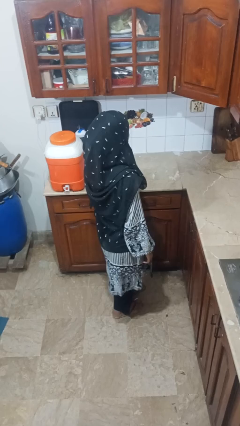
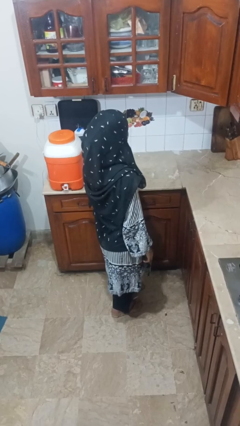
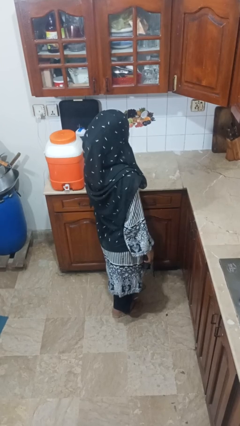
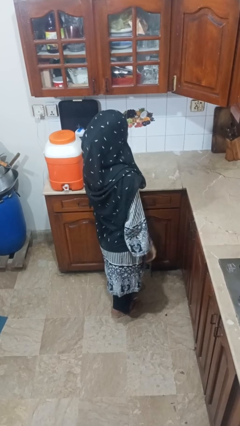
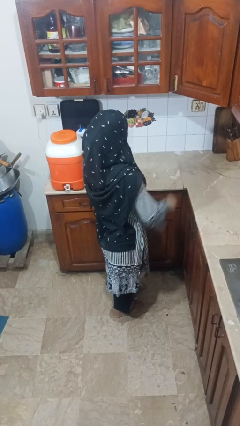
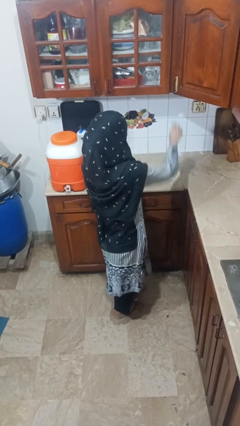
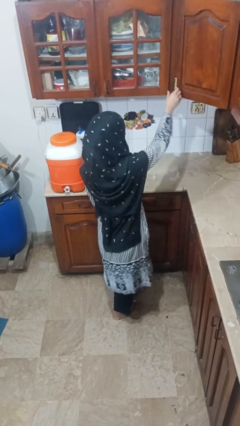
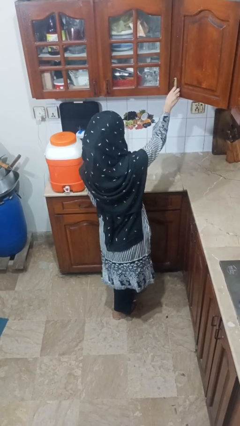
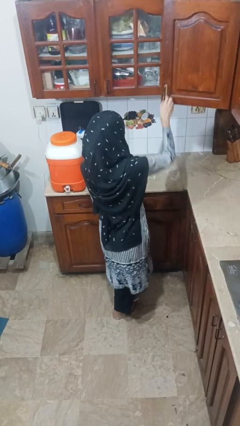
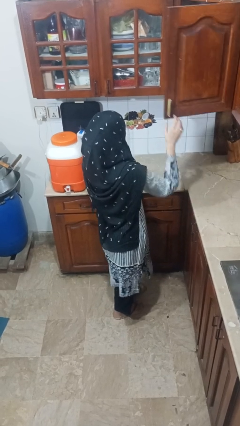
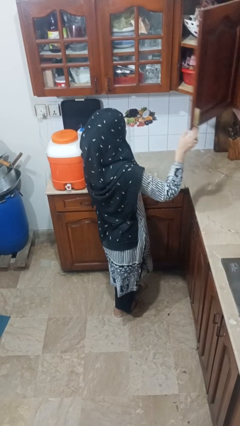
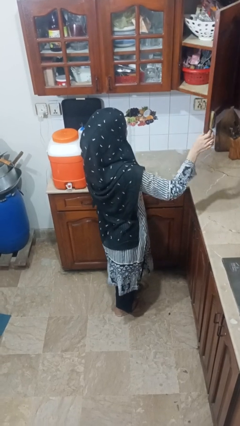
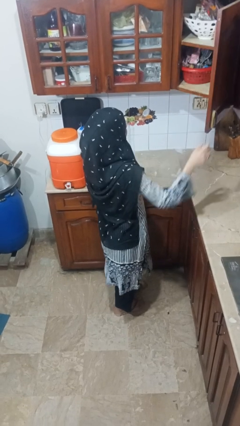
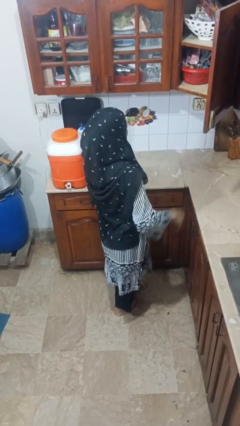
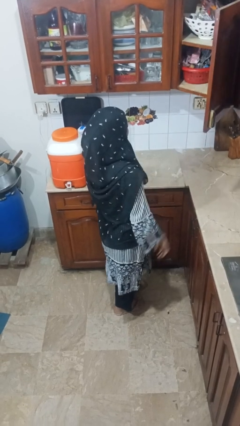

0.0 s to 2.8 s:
person opens cabinet

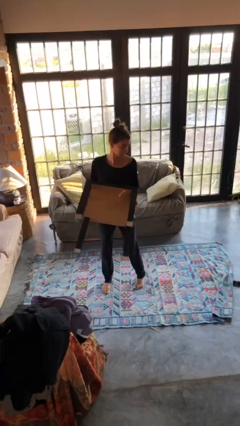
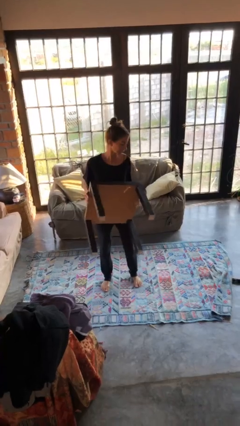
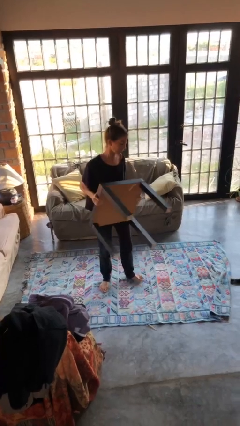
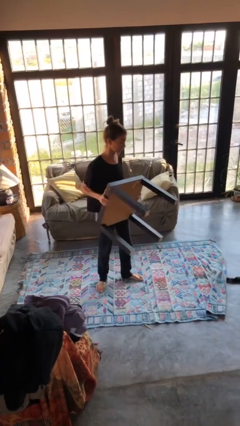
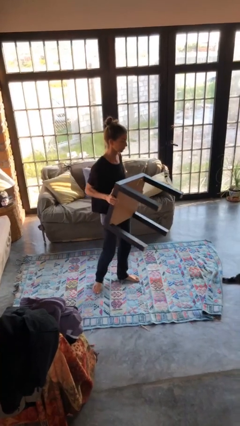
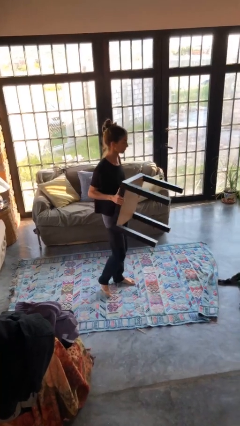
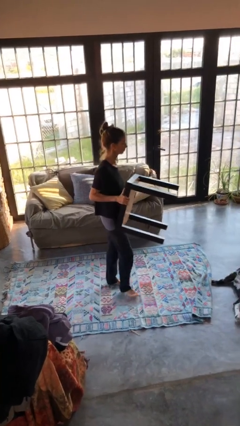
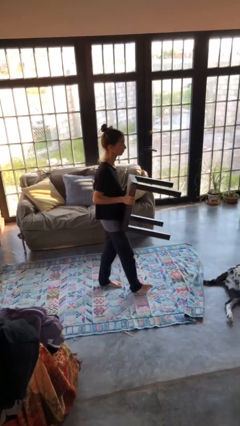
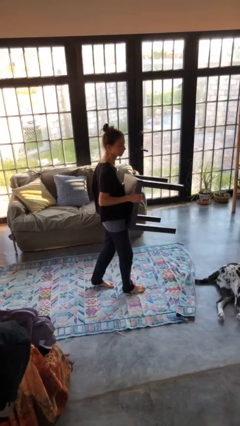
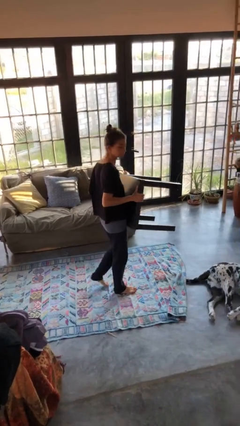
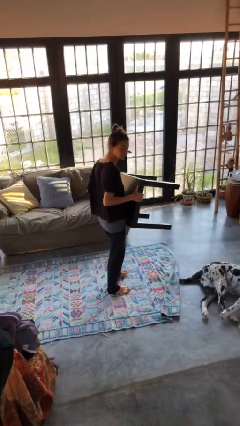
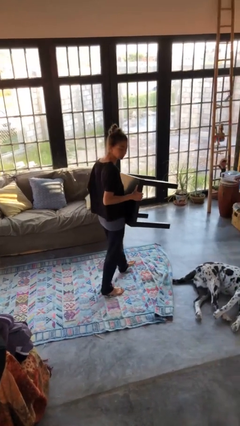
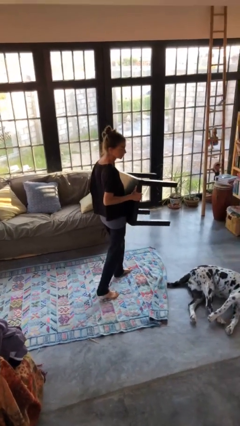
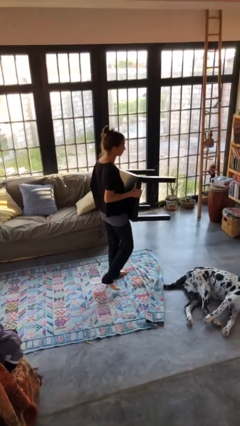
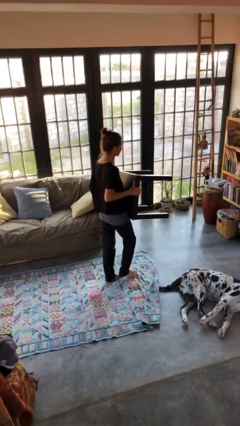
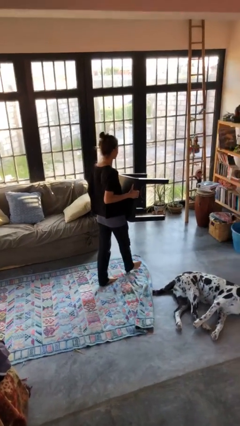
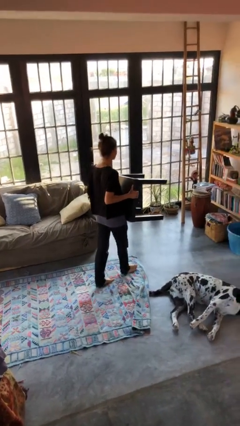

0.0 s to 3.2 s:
person carries furniture

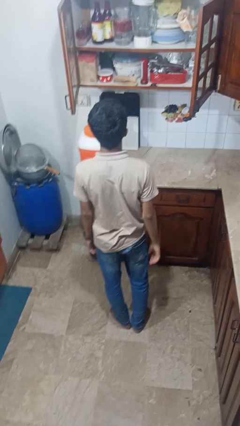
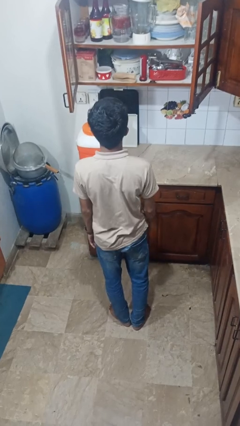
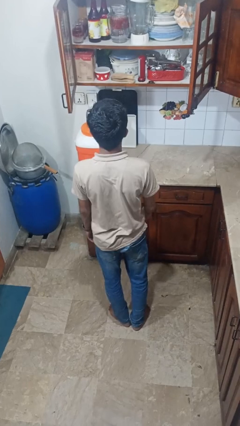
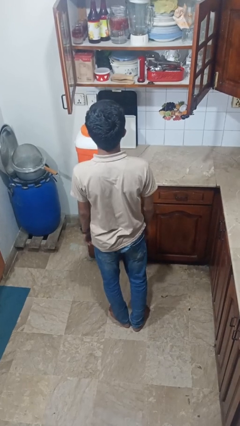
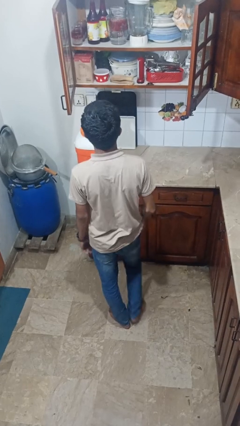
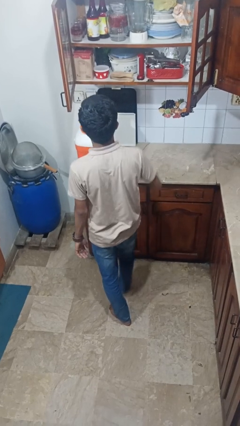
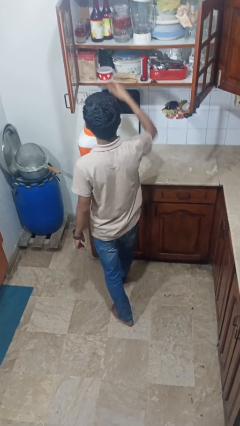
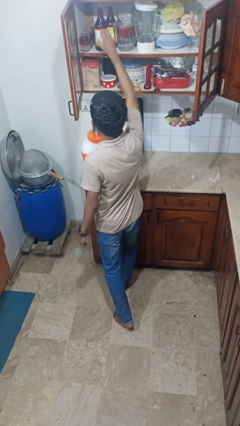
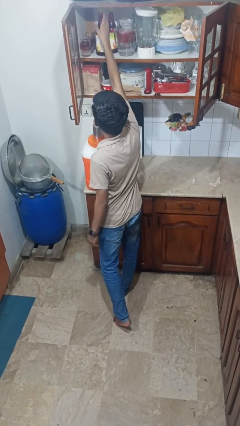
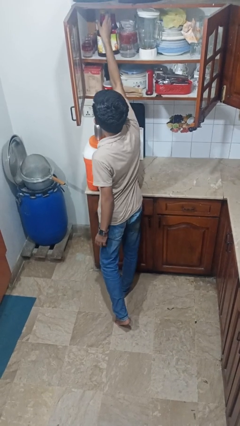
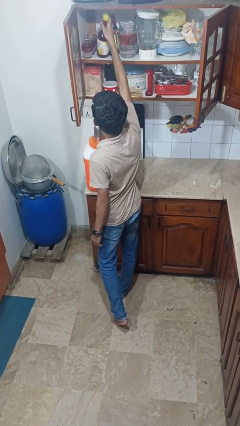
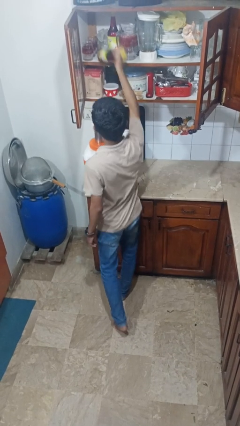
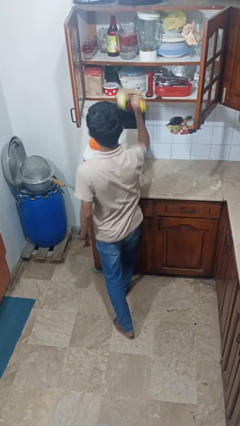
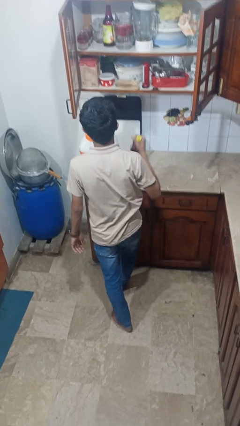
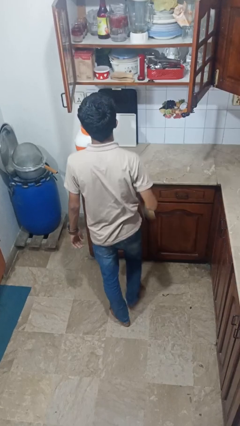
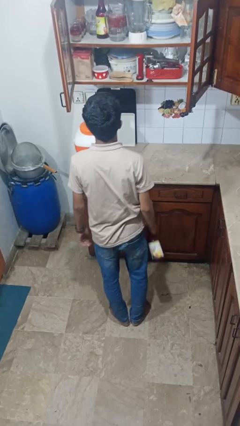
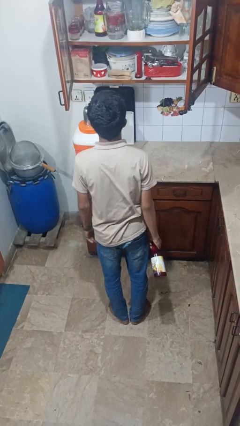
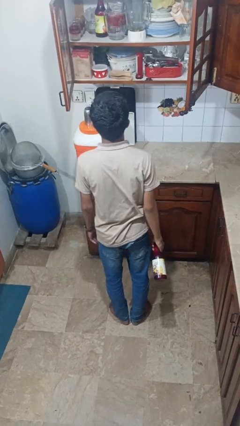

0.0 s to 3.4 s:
person picks up object from cabinet

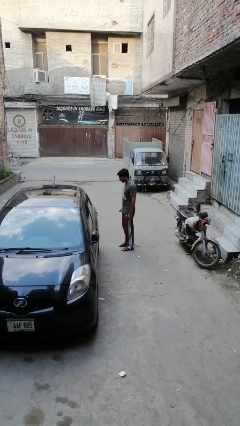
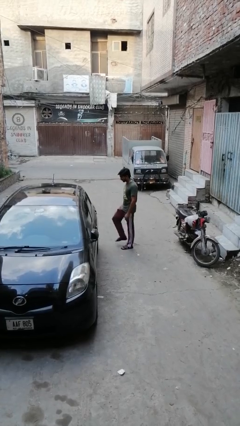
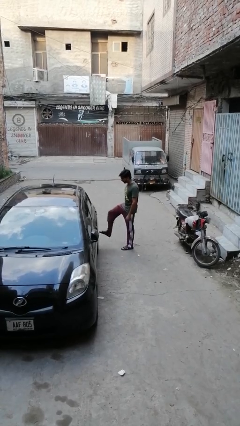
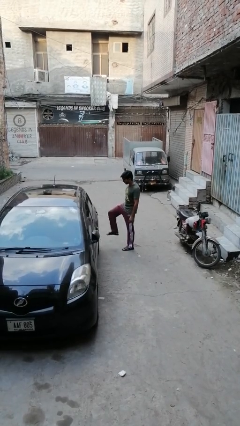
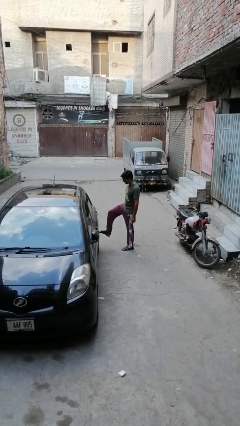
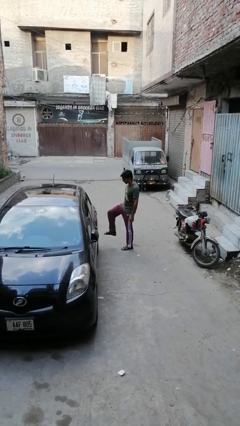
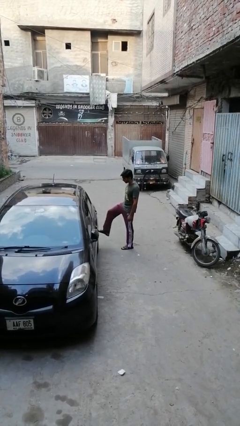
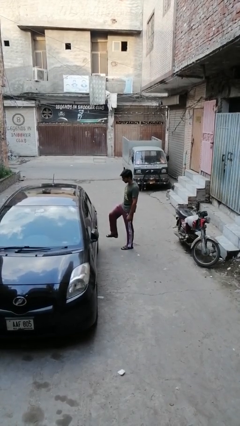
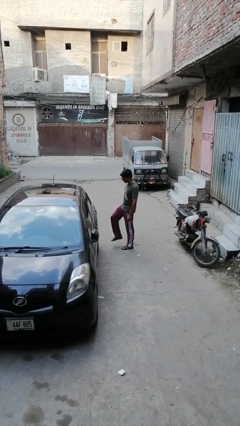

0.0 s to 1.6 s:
person kicks car tires

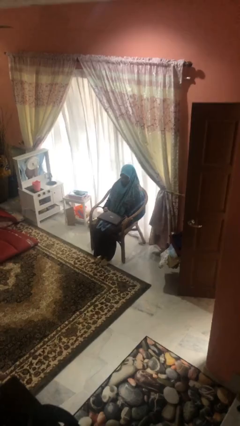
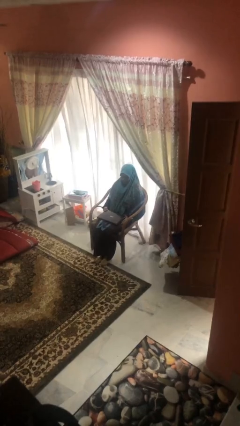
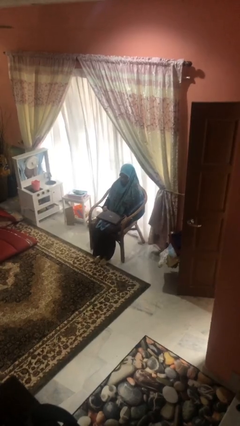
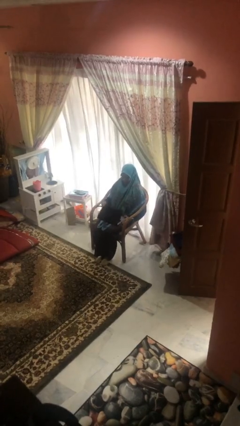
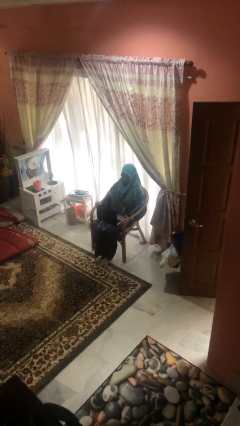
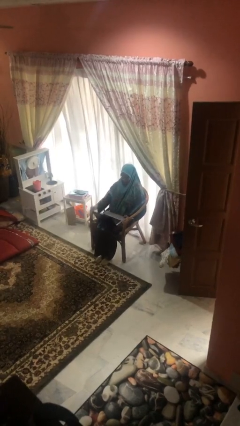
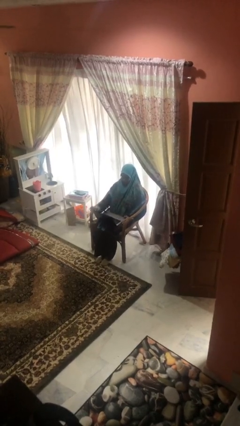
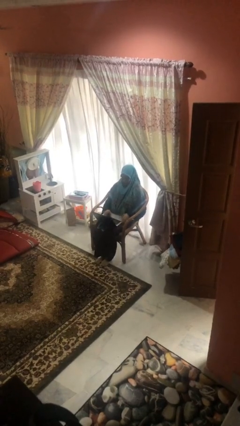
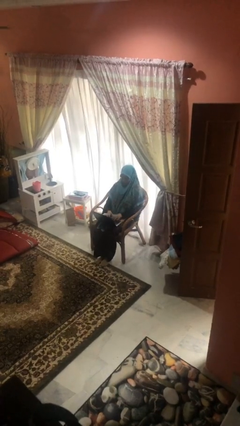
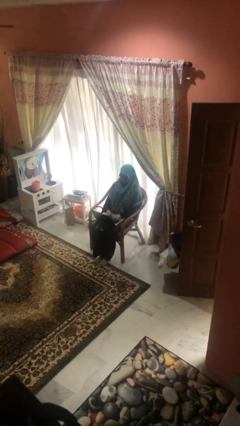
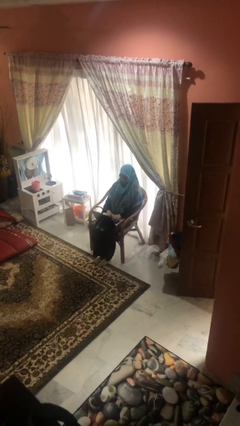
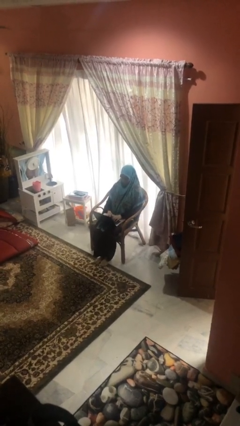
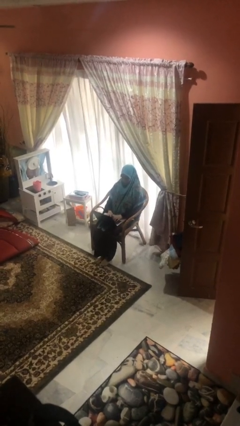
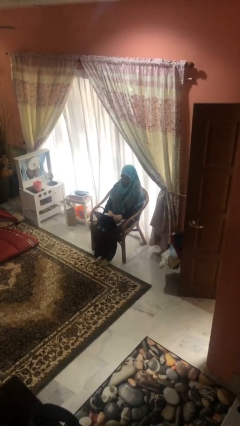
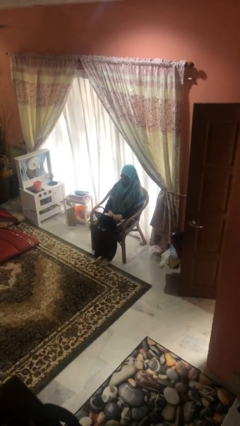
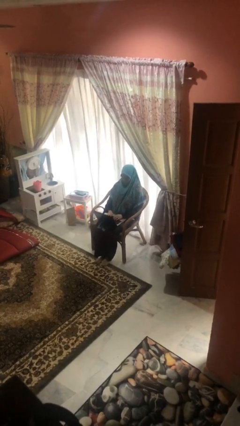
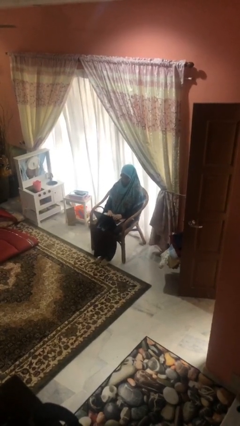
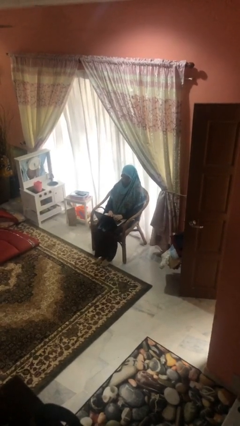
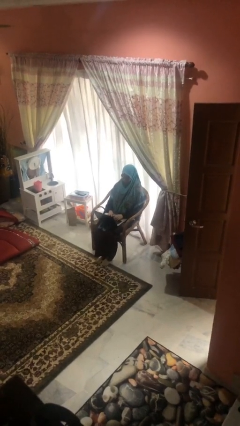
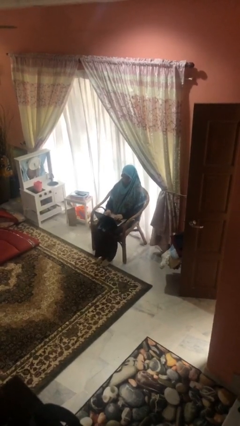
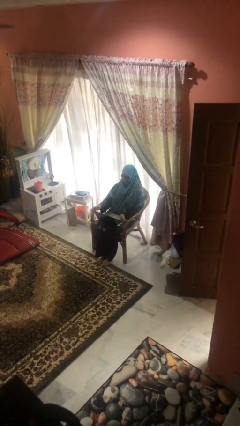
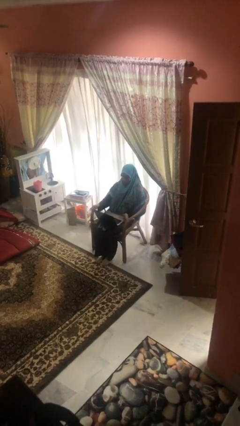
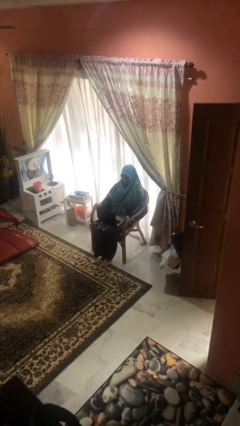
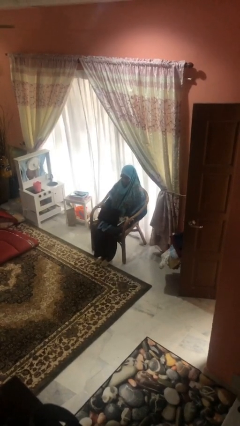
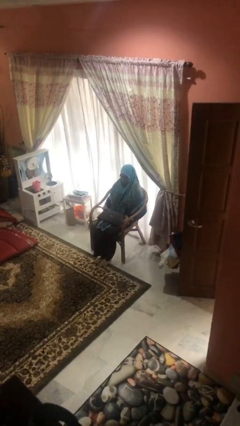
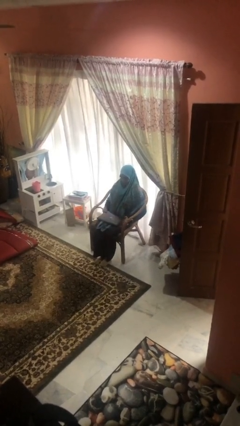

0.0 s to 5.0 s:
person interacts with laptop

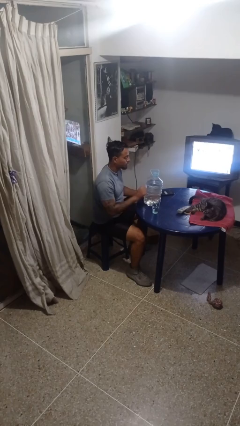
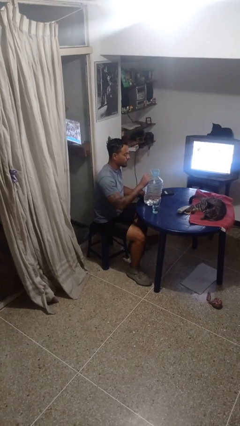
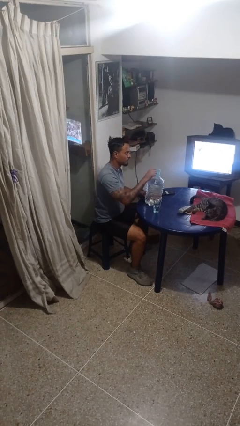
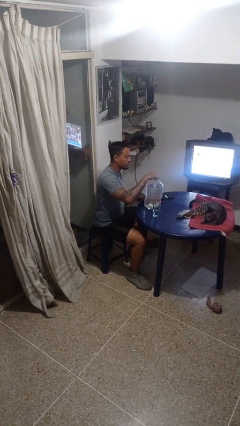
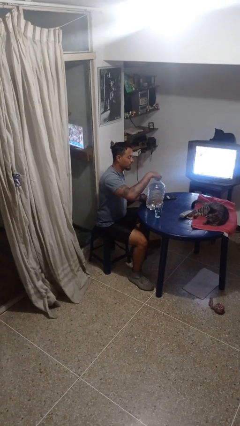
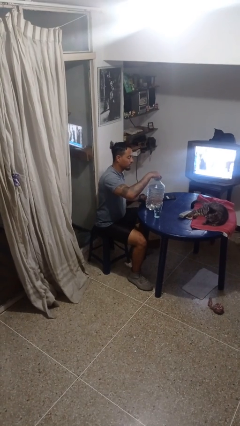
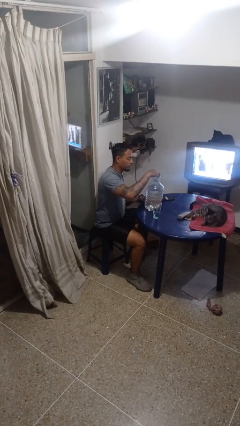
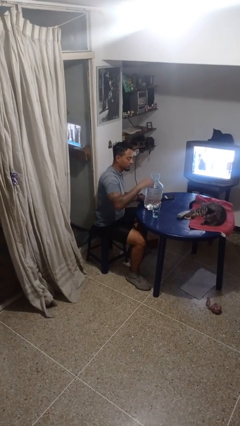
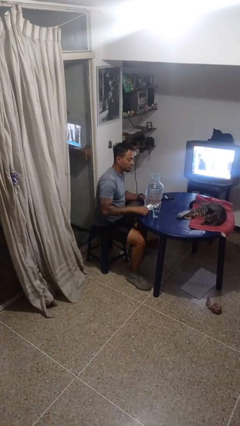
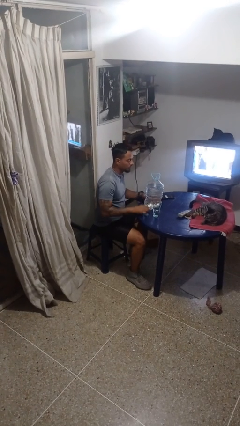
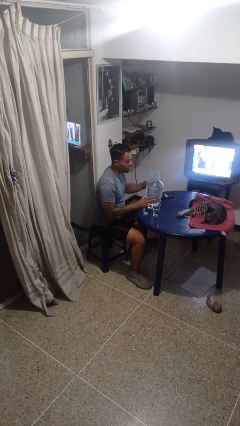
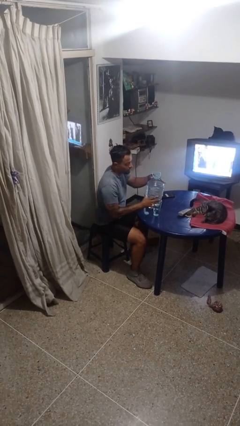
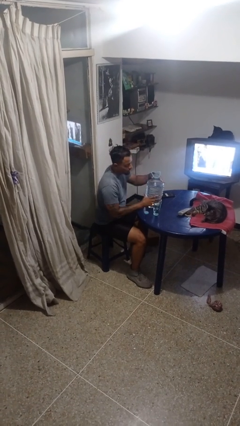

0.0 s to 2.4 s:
person unscrews lid from bottle
